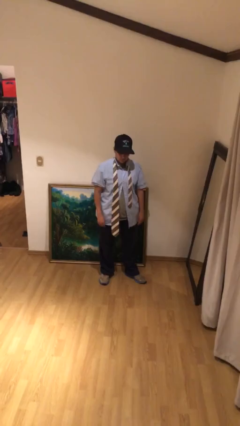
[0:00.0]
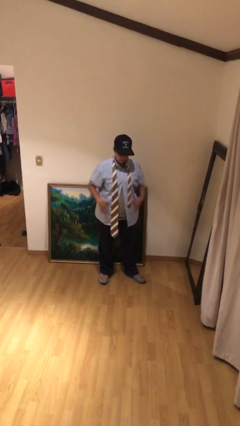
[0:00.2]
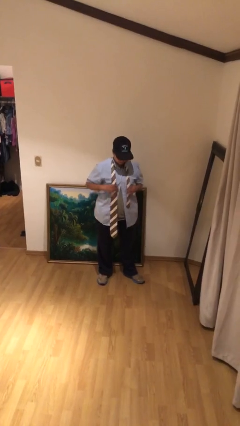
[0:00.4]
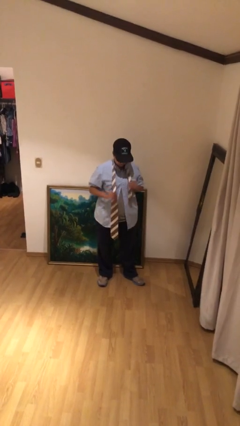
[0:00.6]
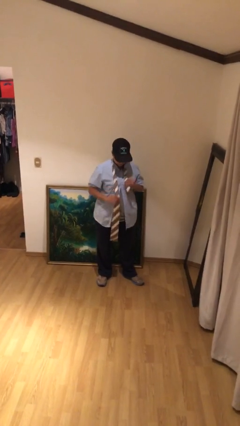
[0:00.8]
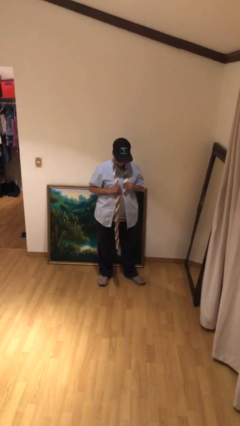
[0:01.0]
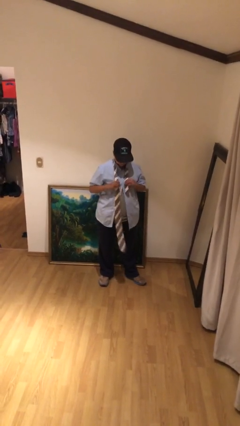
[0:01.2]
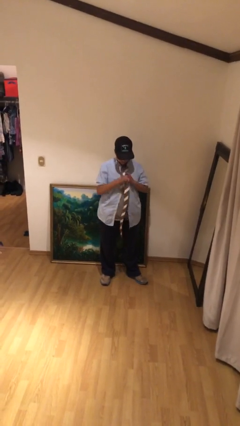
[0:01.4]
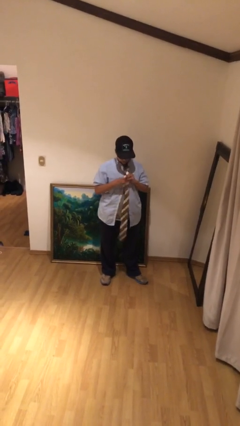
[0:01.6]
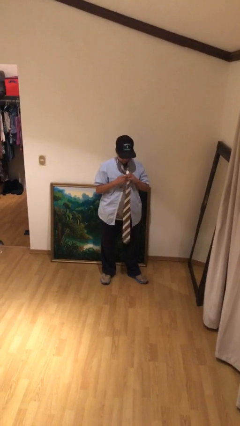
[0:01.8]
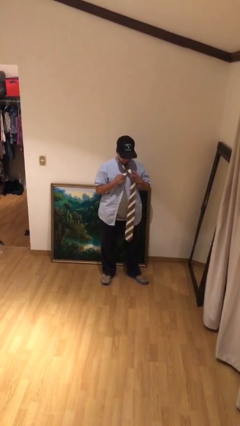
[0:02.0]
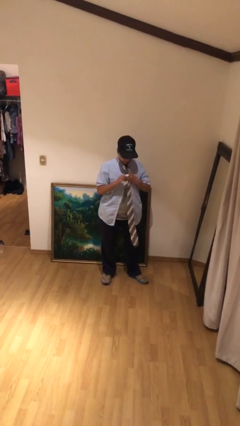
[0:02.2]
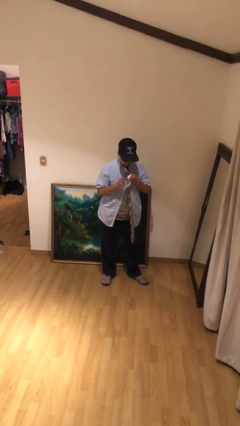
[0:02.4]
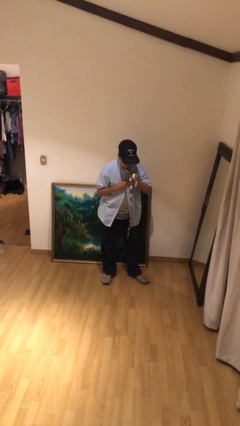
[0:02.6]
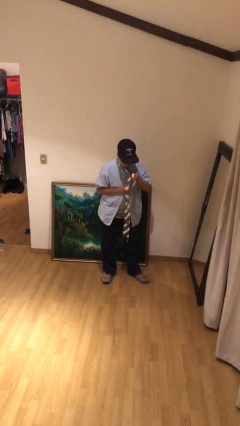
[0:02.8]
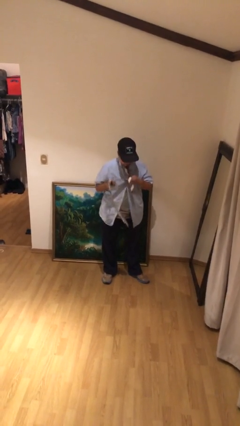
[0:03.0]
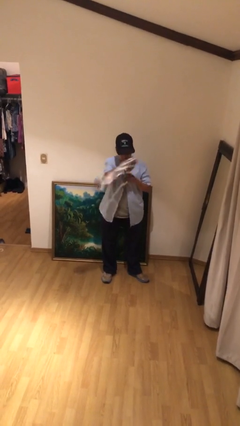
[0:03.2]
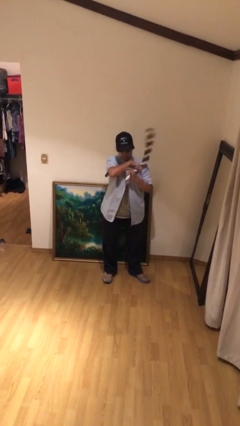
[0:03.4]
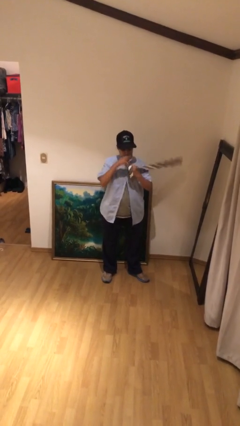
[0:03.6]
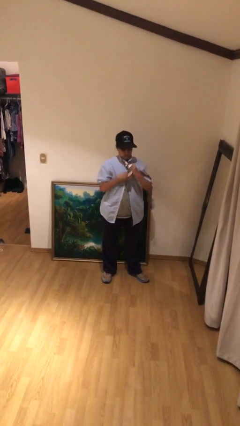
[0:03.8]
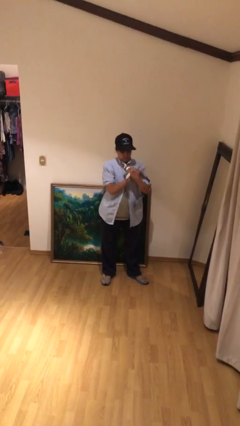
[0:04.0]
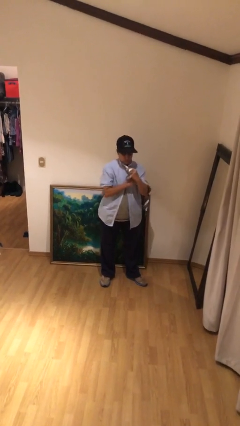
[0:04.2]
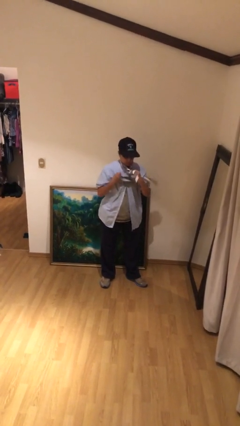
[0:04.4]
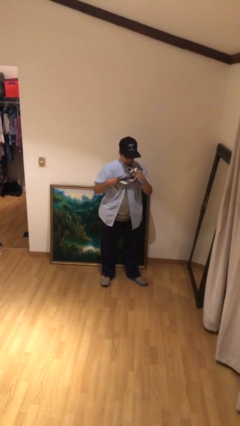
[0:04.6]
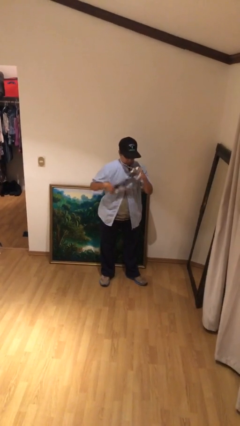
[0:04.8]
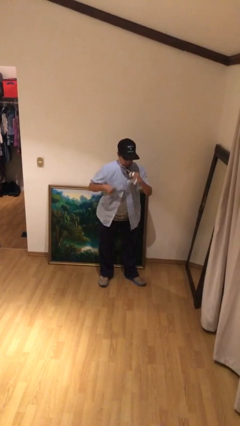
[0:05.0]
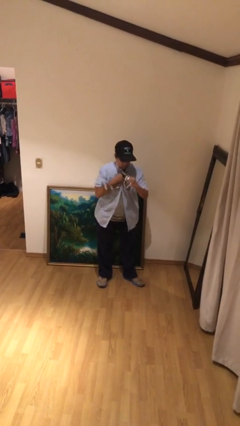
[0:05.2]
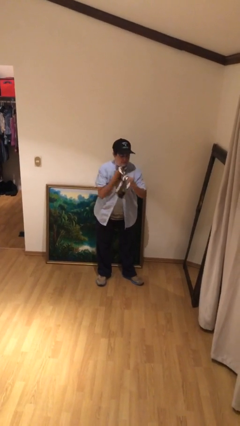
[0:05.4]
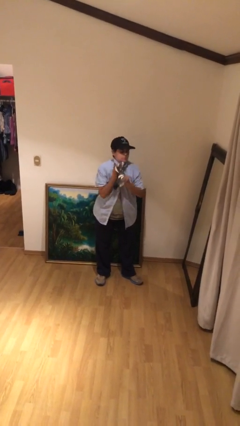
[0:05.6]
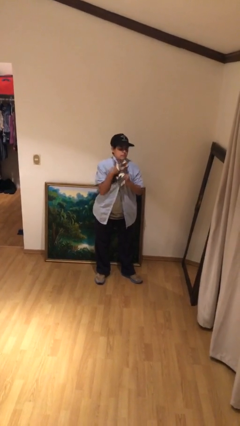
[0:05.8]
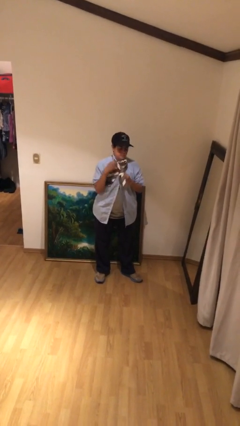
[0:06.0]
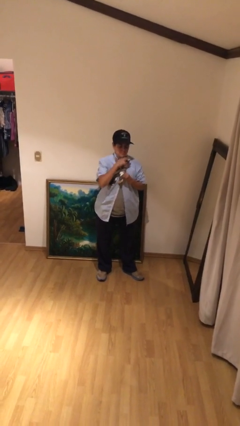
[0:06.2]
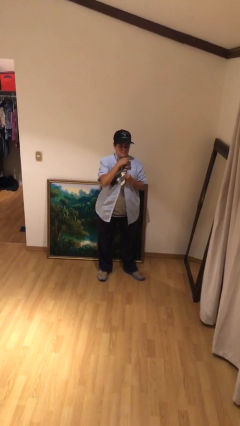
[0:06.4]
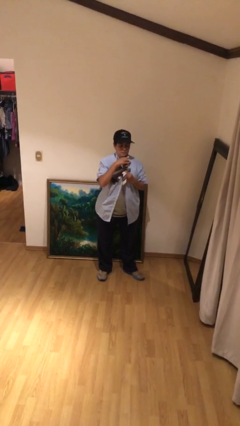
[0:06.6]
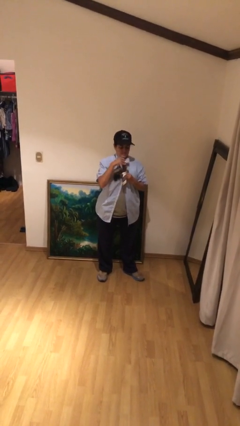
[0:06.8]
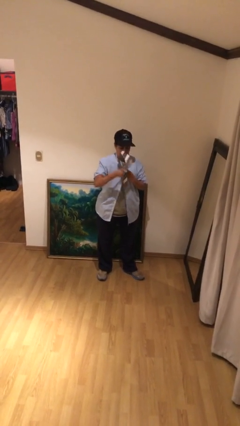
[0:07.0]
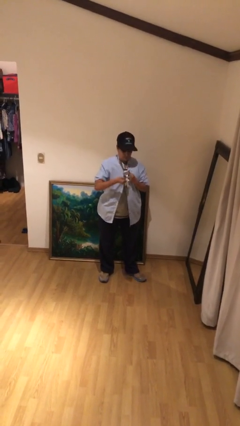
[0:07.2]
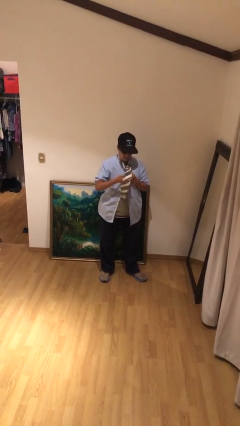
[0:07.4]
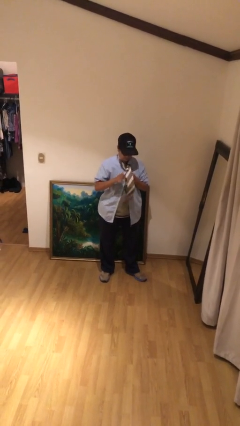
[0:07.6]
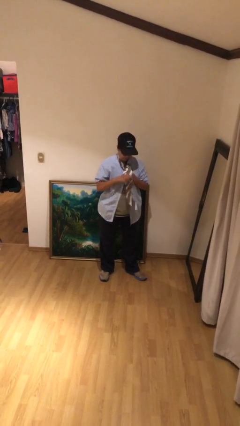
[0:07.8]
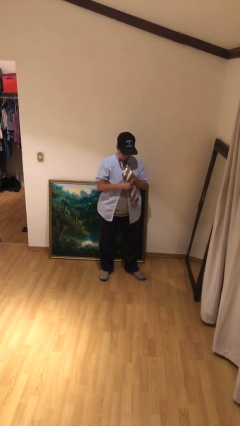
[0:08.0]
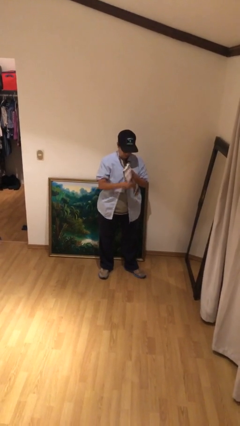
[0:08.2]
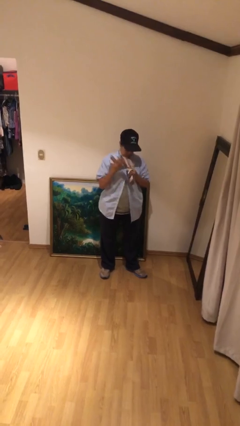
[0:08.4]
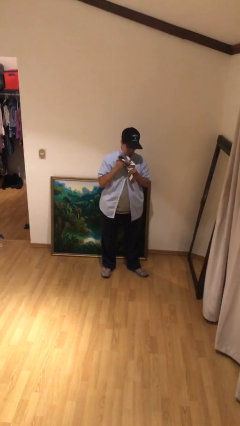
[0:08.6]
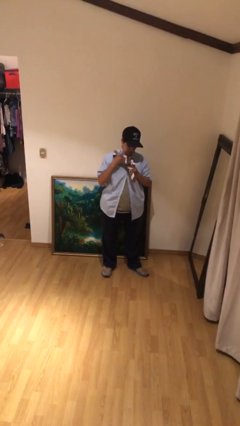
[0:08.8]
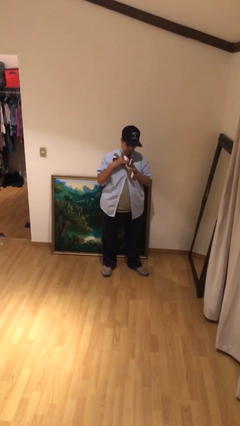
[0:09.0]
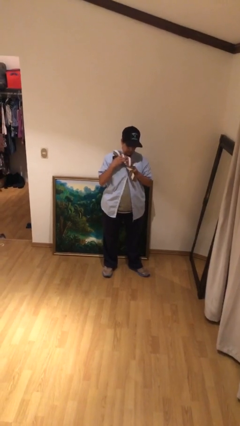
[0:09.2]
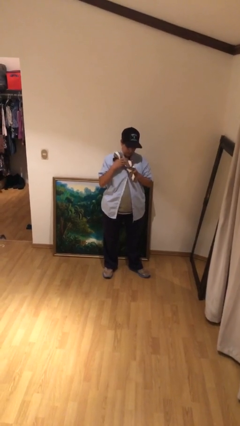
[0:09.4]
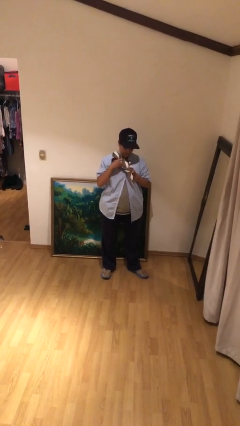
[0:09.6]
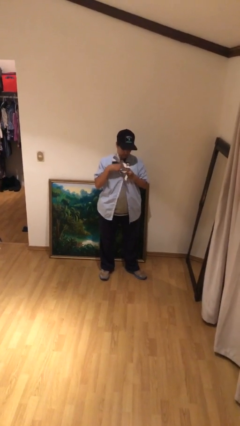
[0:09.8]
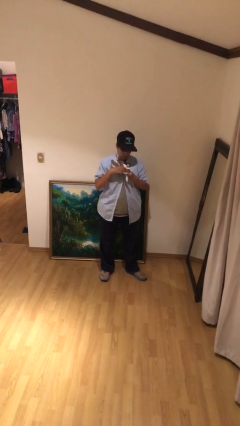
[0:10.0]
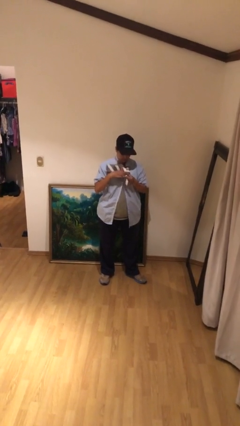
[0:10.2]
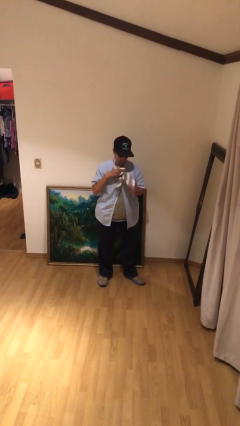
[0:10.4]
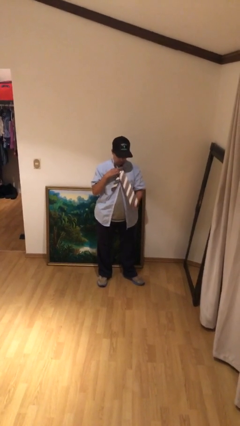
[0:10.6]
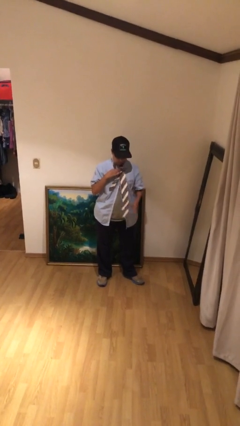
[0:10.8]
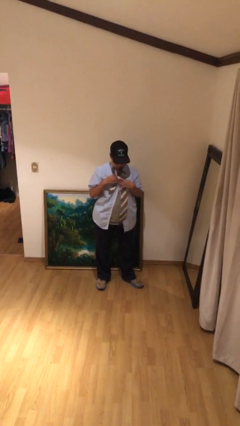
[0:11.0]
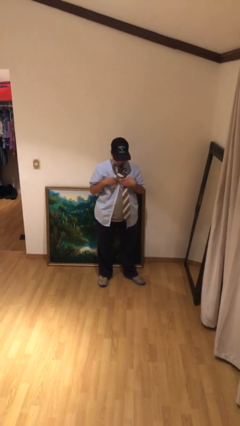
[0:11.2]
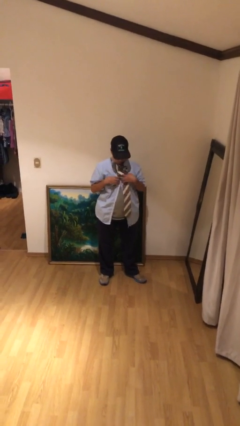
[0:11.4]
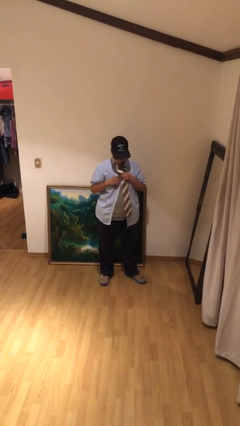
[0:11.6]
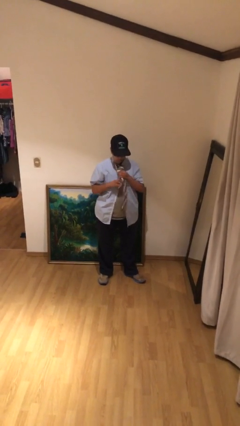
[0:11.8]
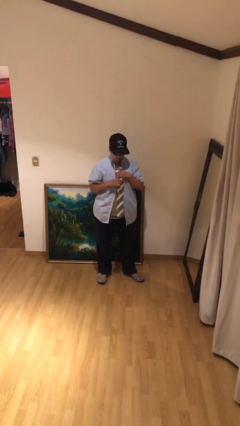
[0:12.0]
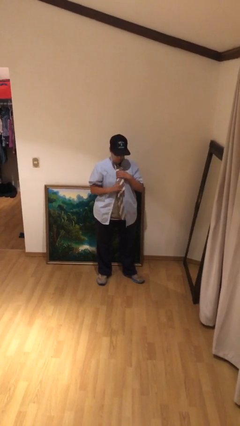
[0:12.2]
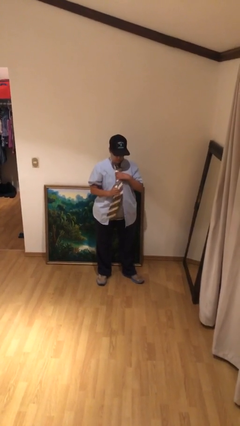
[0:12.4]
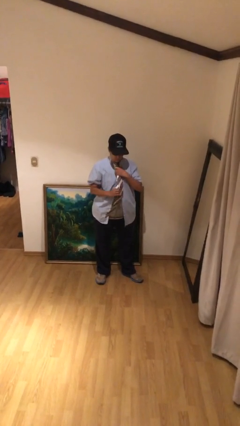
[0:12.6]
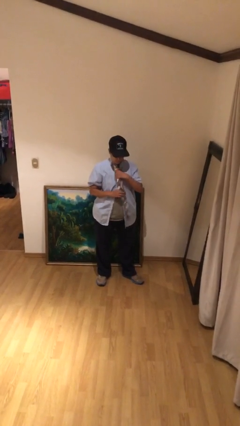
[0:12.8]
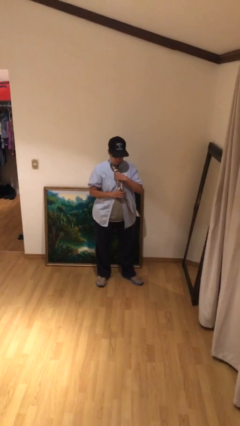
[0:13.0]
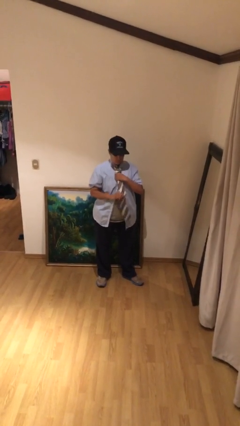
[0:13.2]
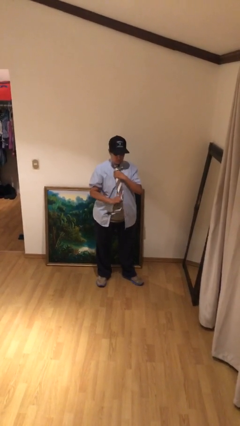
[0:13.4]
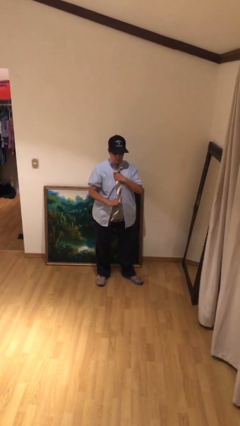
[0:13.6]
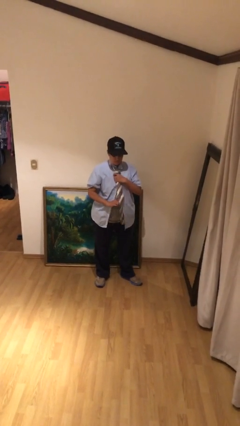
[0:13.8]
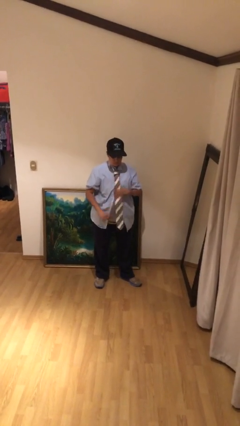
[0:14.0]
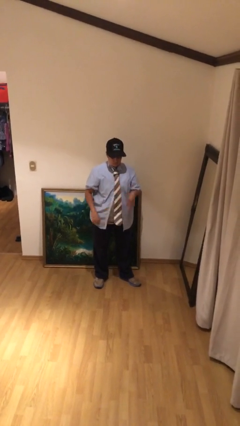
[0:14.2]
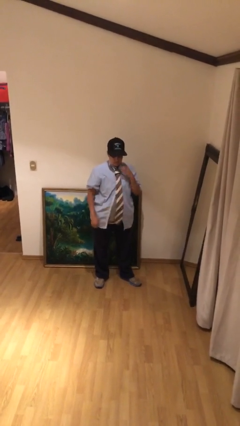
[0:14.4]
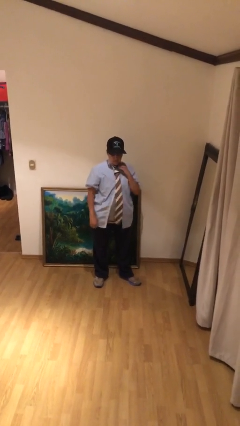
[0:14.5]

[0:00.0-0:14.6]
person puts on necktie

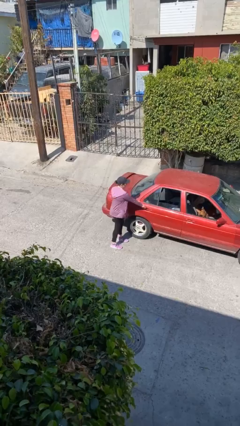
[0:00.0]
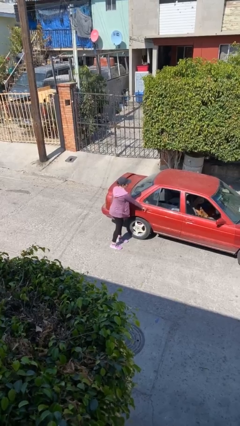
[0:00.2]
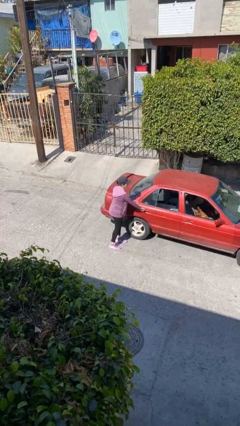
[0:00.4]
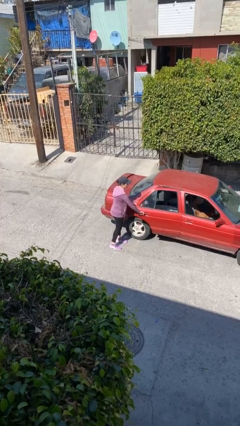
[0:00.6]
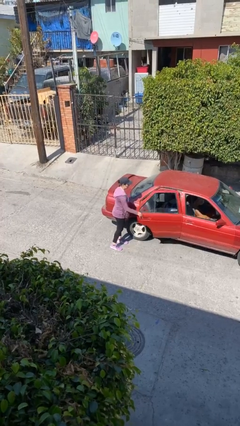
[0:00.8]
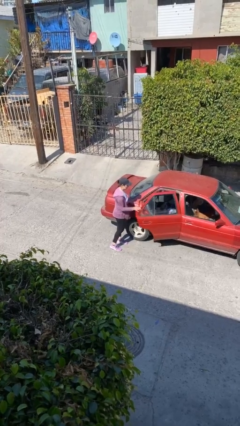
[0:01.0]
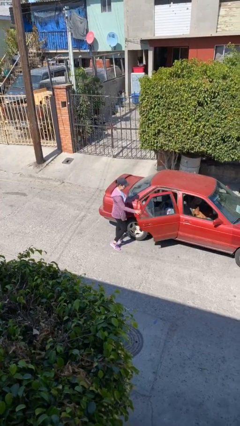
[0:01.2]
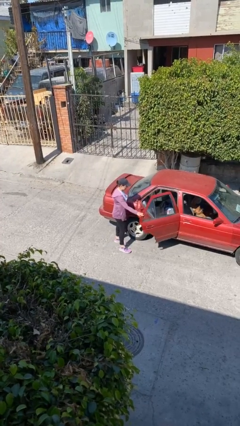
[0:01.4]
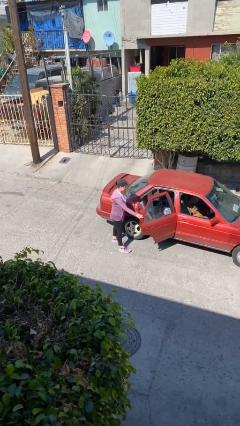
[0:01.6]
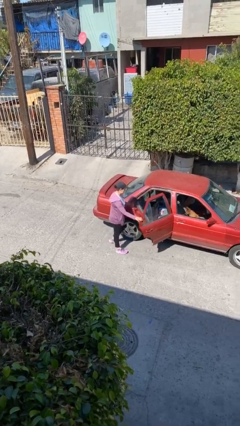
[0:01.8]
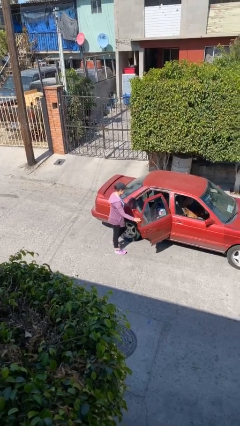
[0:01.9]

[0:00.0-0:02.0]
person opens car door

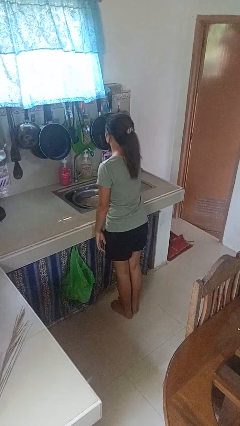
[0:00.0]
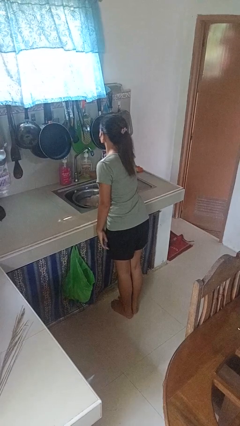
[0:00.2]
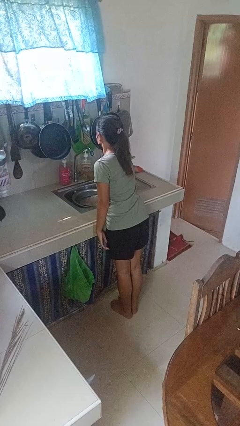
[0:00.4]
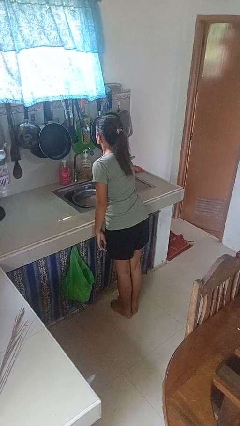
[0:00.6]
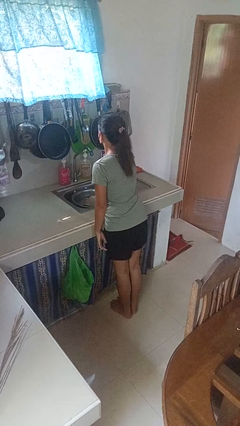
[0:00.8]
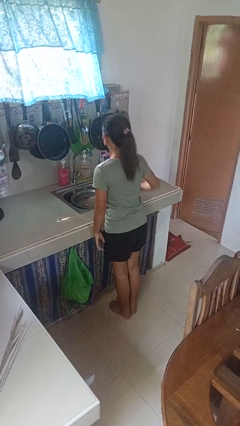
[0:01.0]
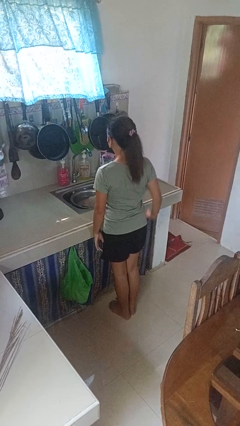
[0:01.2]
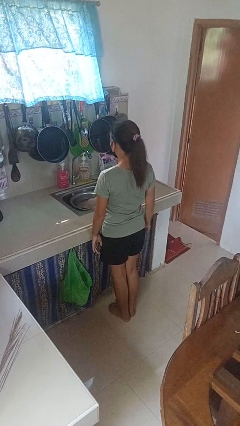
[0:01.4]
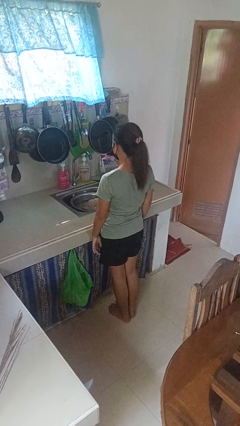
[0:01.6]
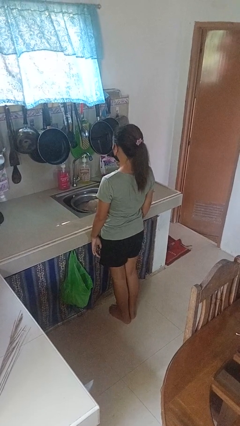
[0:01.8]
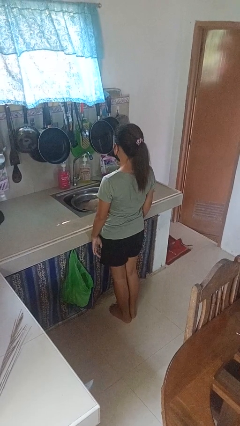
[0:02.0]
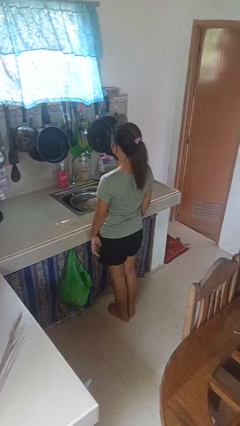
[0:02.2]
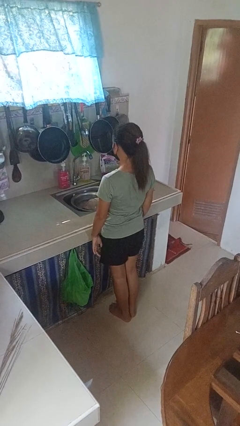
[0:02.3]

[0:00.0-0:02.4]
person turns off faucet
